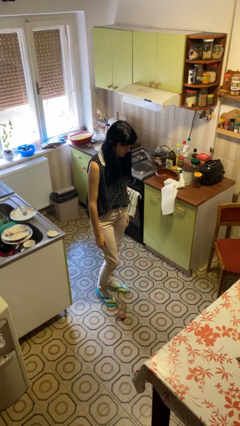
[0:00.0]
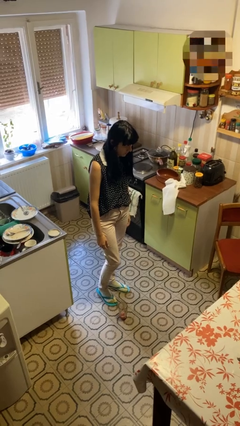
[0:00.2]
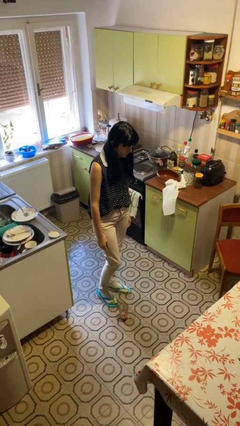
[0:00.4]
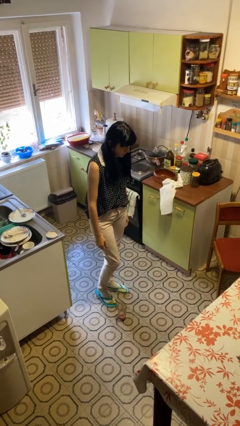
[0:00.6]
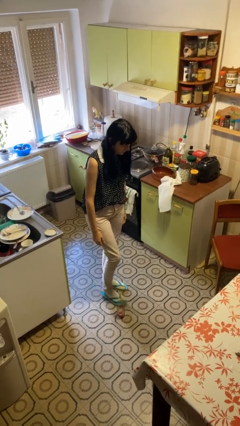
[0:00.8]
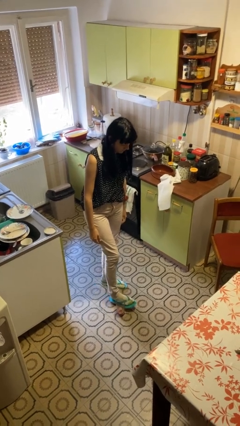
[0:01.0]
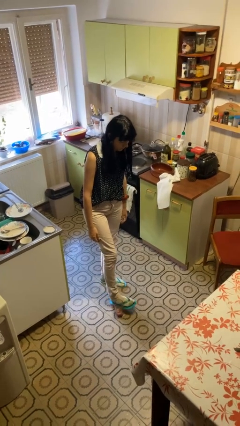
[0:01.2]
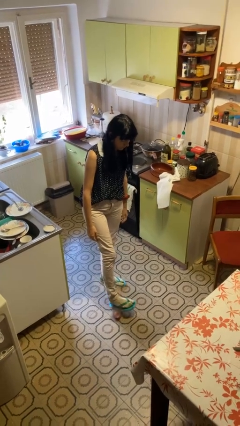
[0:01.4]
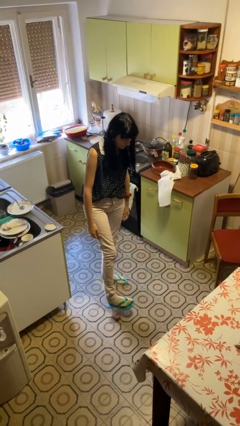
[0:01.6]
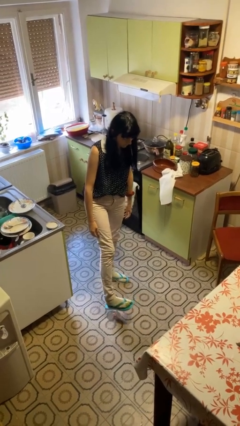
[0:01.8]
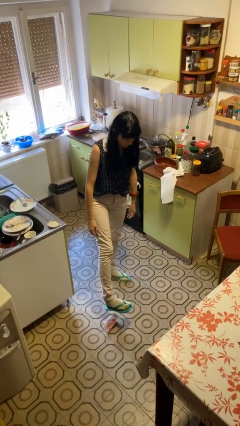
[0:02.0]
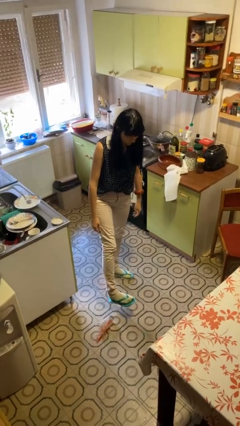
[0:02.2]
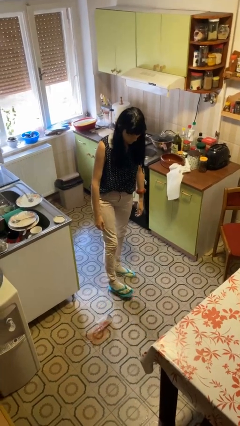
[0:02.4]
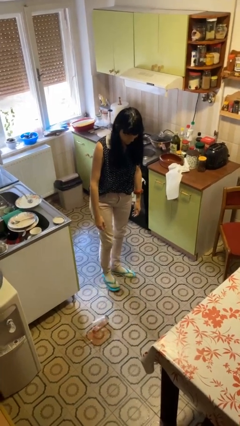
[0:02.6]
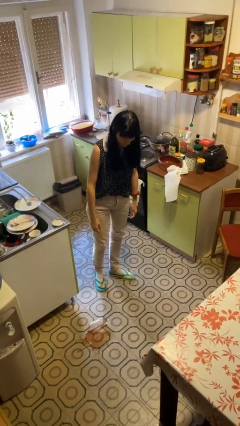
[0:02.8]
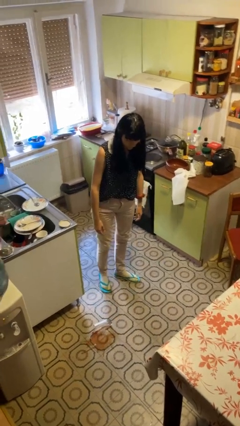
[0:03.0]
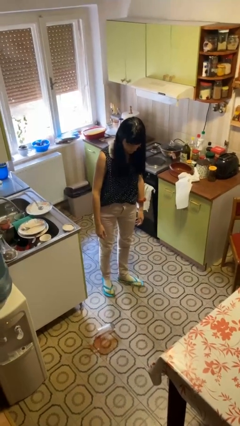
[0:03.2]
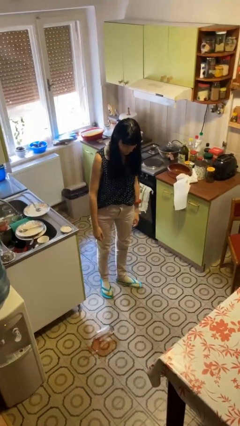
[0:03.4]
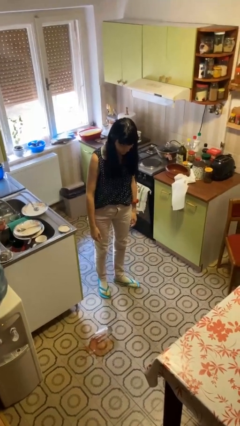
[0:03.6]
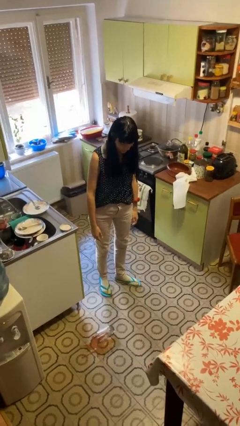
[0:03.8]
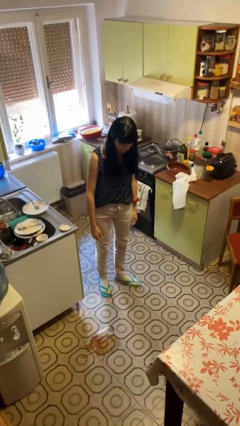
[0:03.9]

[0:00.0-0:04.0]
person spills on floor

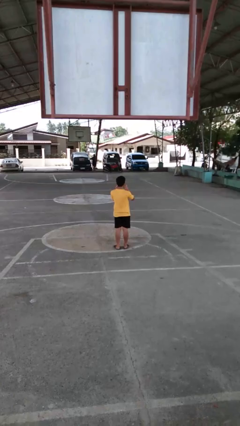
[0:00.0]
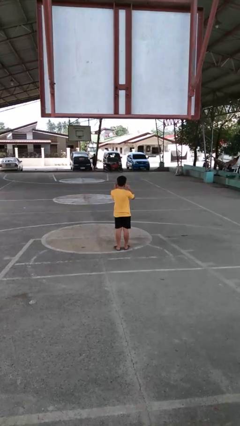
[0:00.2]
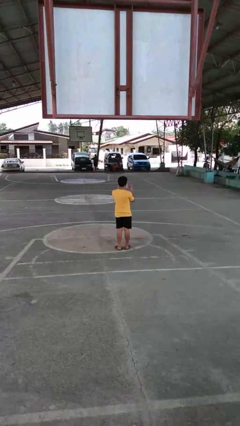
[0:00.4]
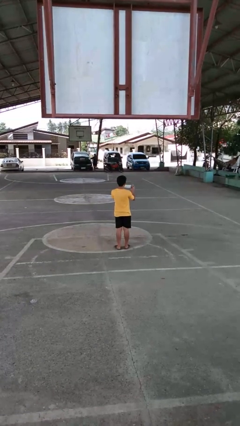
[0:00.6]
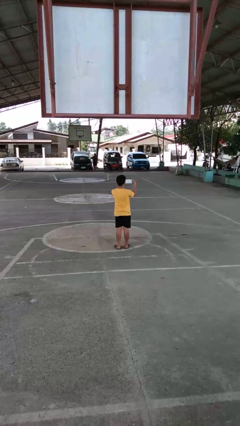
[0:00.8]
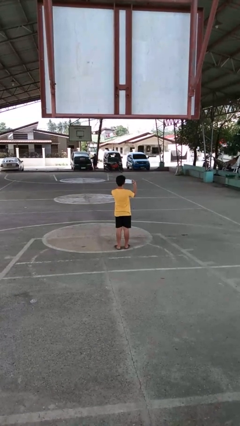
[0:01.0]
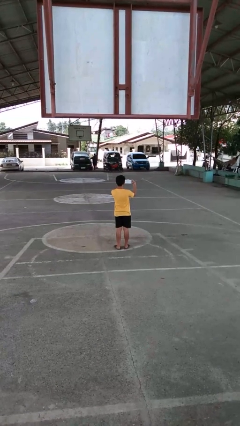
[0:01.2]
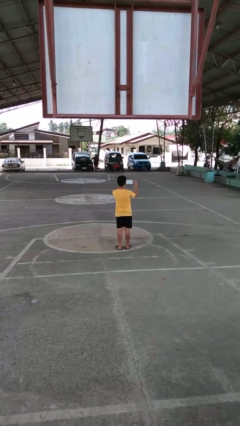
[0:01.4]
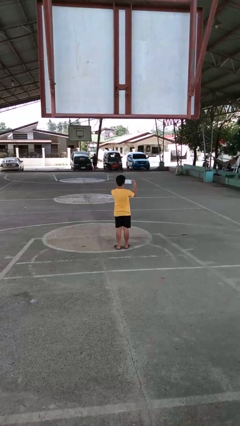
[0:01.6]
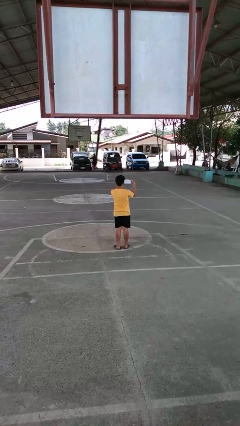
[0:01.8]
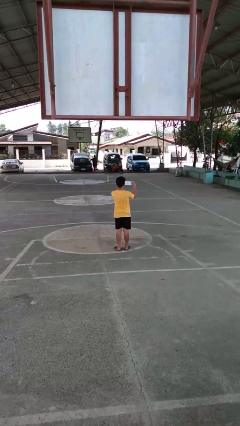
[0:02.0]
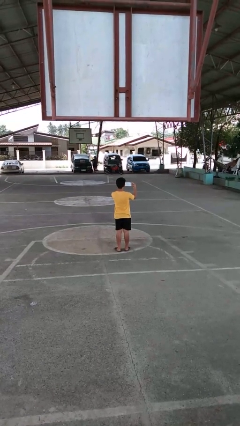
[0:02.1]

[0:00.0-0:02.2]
person takes off facemask

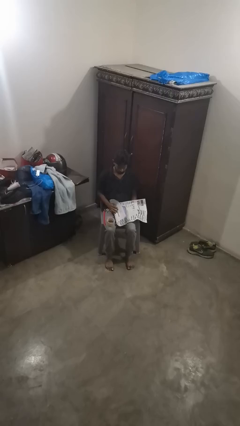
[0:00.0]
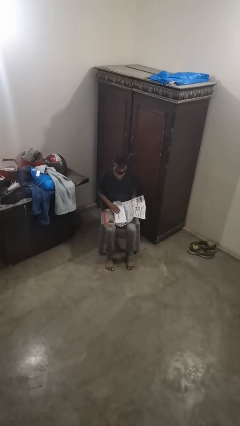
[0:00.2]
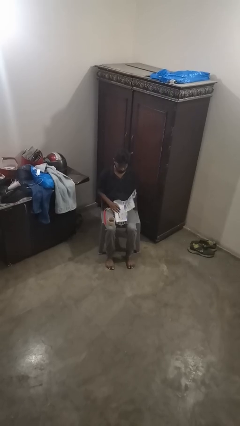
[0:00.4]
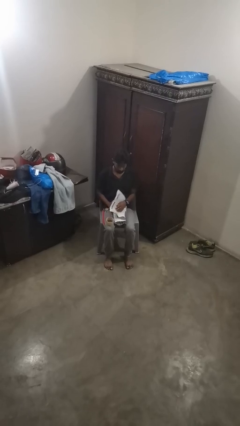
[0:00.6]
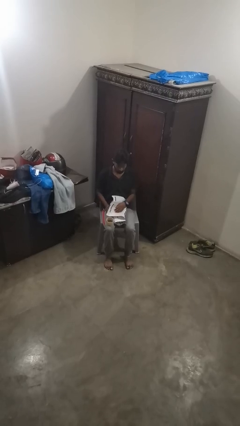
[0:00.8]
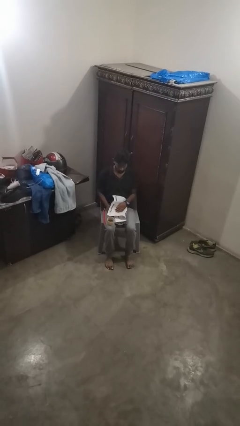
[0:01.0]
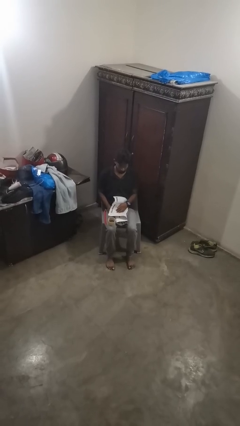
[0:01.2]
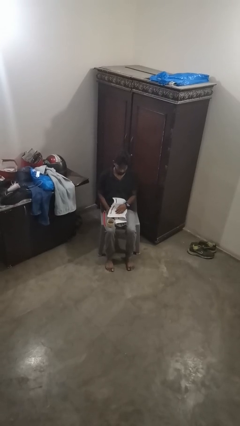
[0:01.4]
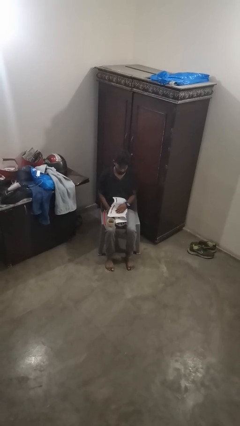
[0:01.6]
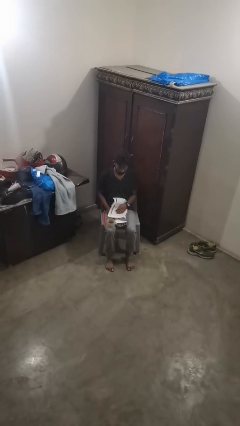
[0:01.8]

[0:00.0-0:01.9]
person wraps box

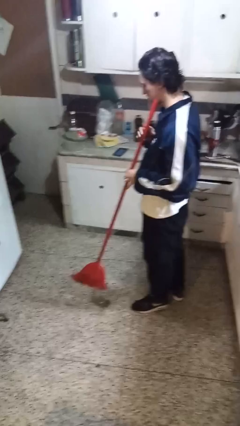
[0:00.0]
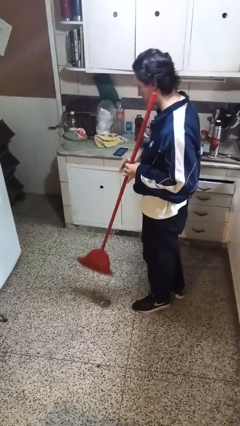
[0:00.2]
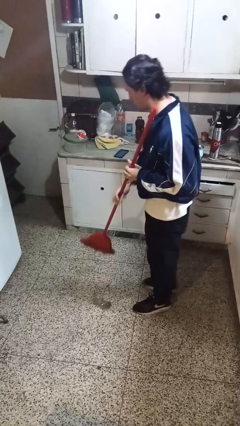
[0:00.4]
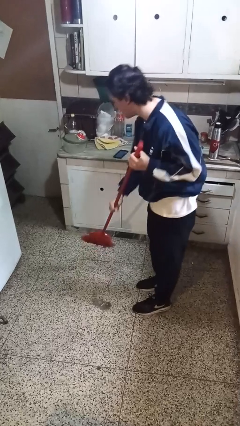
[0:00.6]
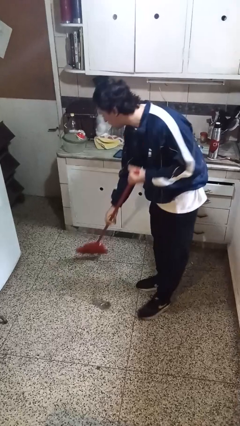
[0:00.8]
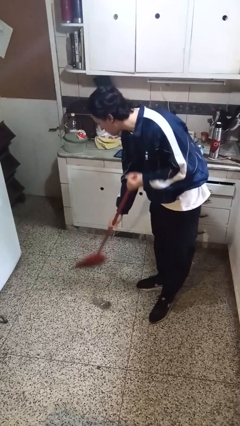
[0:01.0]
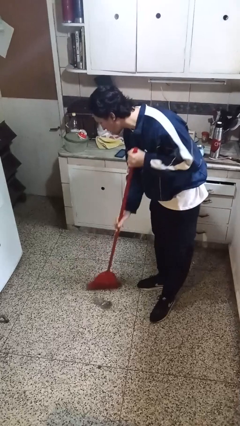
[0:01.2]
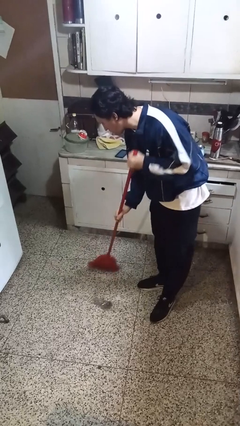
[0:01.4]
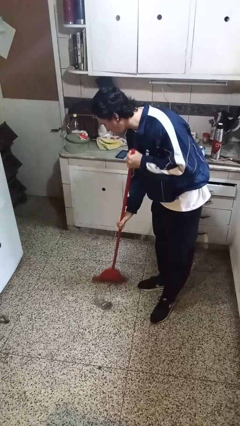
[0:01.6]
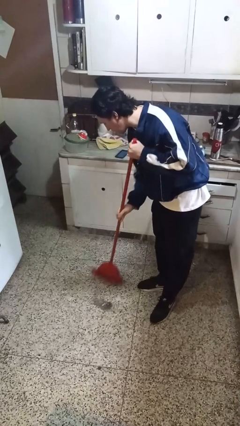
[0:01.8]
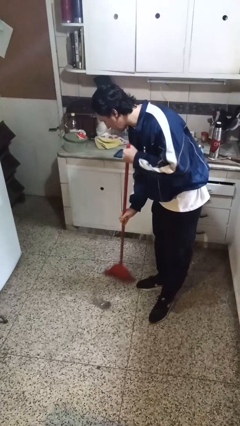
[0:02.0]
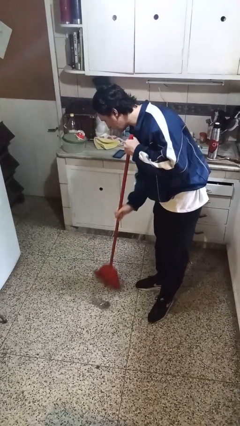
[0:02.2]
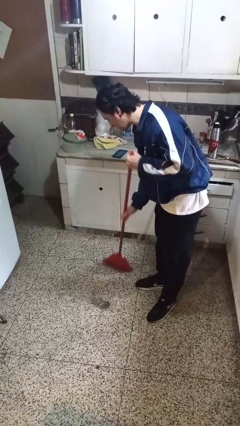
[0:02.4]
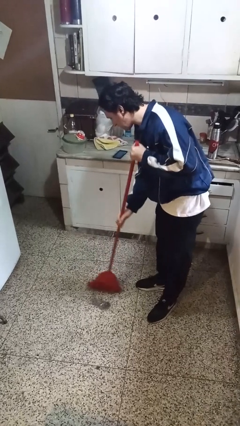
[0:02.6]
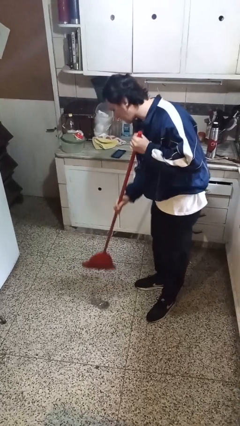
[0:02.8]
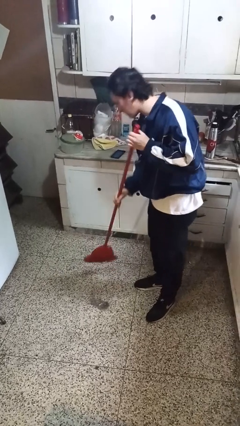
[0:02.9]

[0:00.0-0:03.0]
person sweeps floor

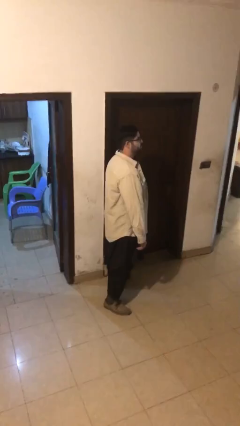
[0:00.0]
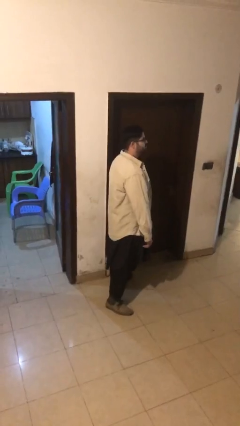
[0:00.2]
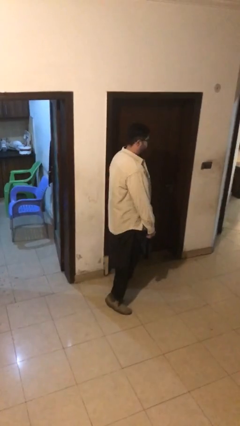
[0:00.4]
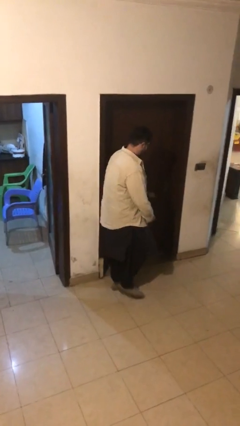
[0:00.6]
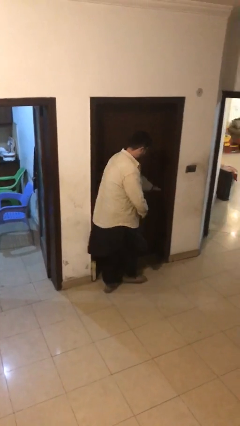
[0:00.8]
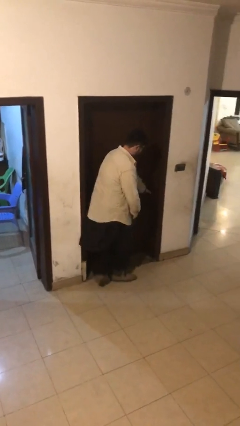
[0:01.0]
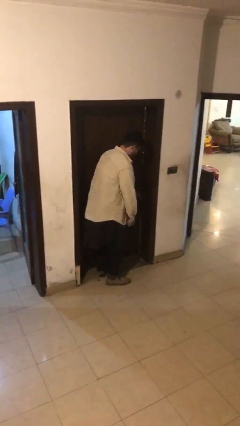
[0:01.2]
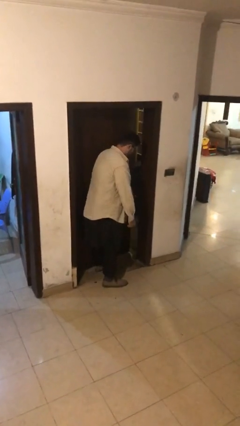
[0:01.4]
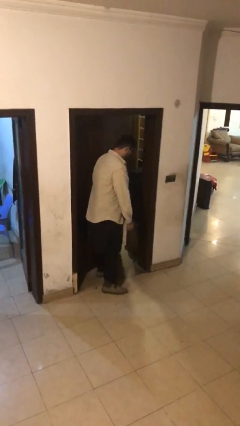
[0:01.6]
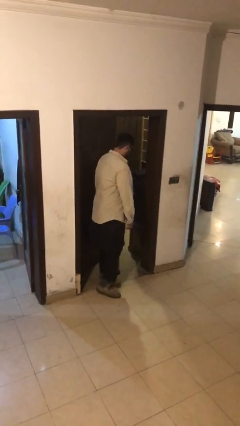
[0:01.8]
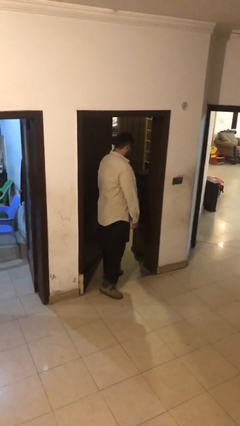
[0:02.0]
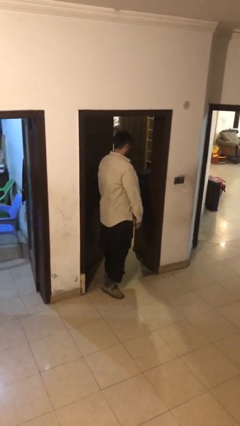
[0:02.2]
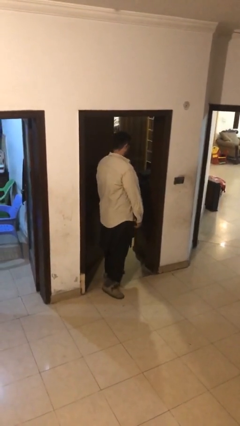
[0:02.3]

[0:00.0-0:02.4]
person opens facility door

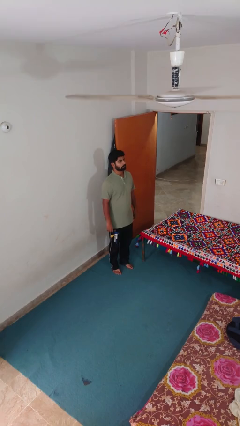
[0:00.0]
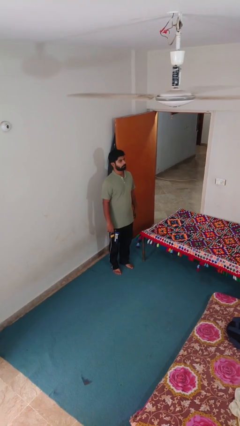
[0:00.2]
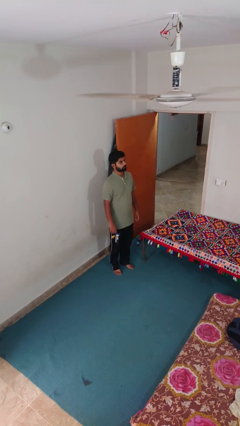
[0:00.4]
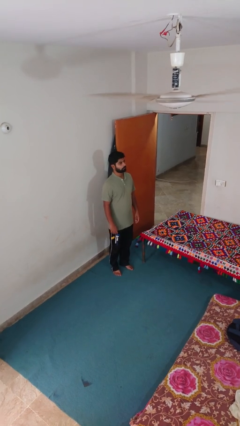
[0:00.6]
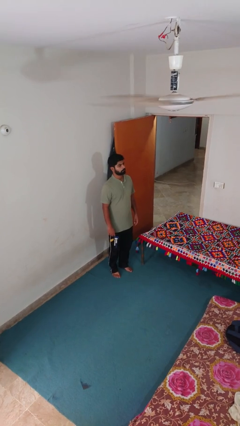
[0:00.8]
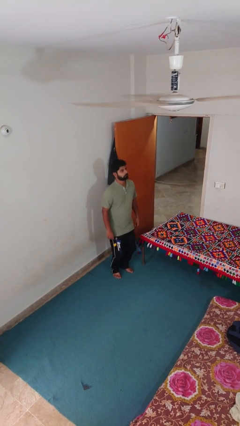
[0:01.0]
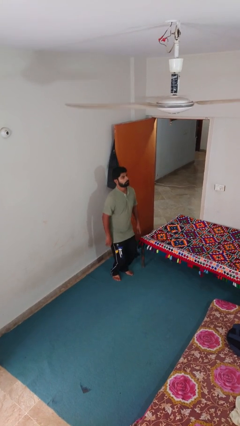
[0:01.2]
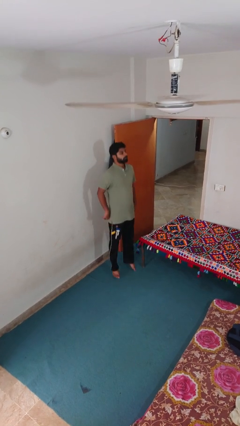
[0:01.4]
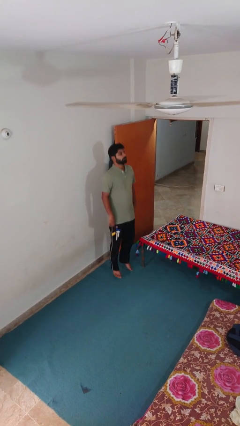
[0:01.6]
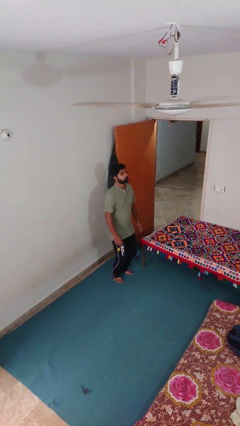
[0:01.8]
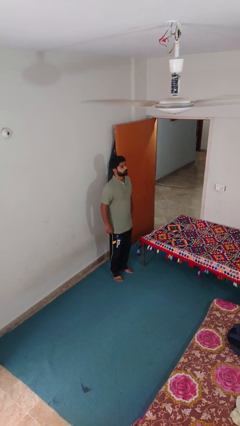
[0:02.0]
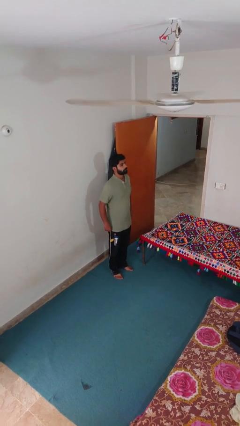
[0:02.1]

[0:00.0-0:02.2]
person jumps

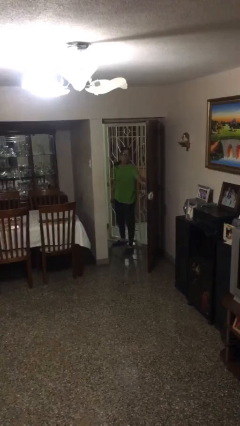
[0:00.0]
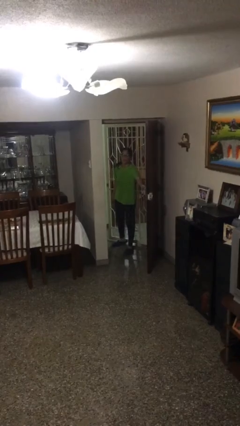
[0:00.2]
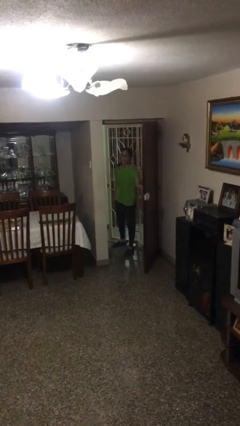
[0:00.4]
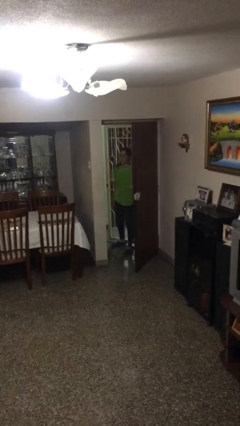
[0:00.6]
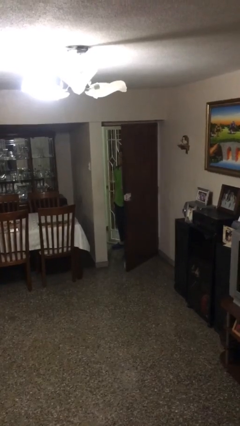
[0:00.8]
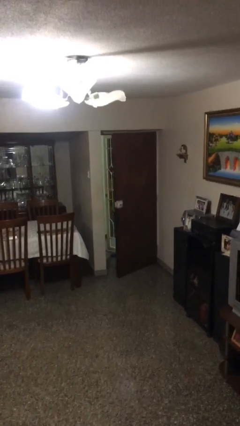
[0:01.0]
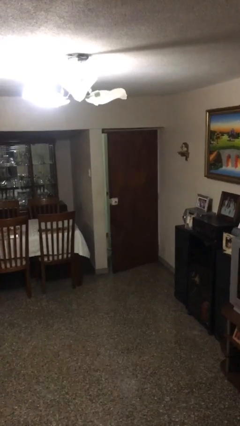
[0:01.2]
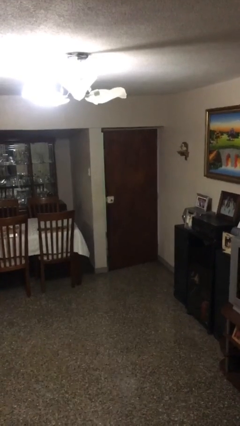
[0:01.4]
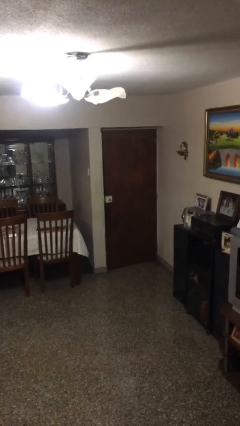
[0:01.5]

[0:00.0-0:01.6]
person closes facility door
